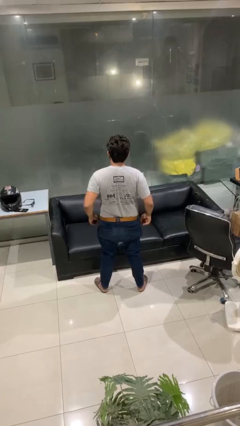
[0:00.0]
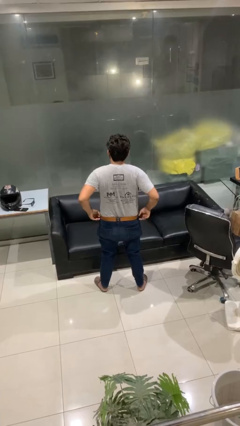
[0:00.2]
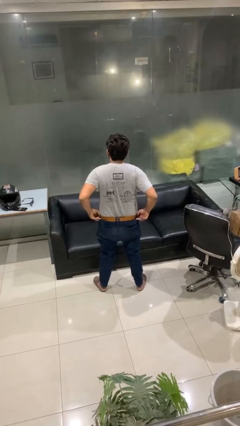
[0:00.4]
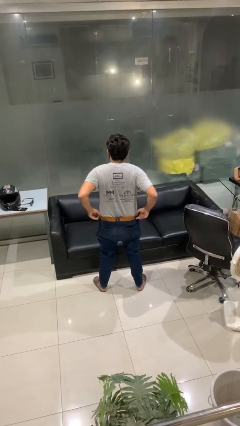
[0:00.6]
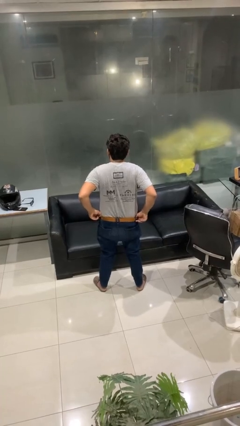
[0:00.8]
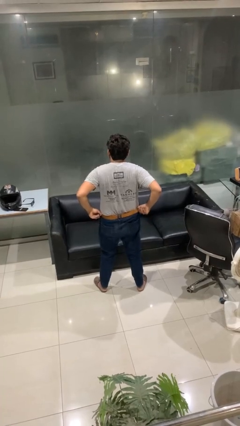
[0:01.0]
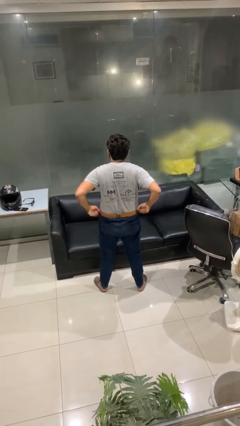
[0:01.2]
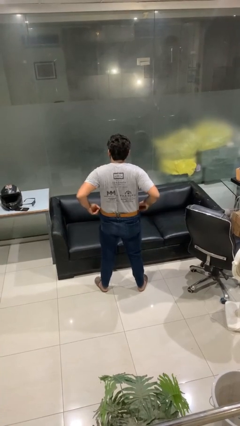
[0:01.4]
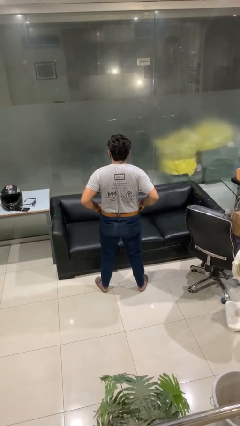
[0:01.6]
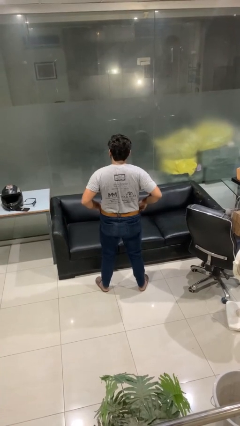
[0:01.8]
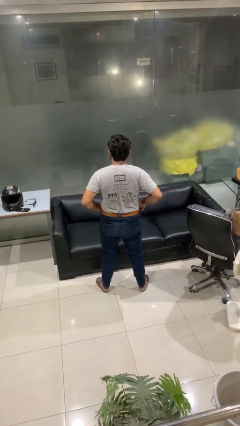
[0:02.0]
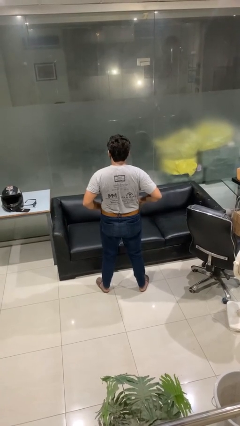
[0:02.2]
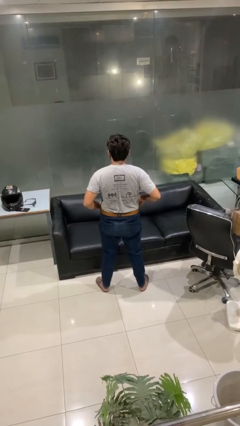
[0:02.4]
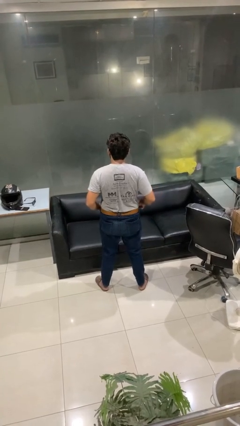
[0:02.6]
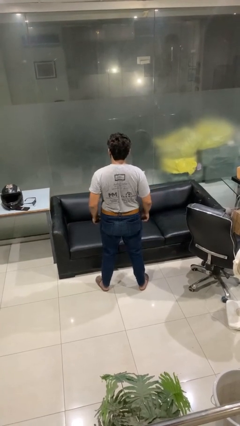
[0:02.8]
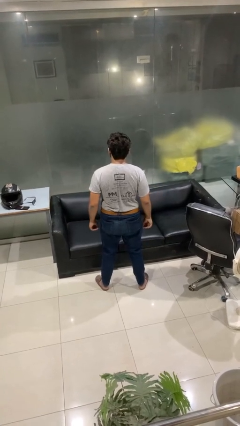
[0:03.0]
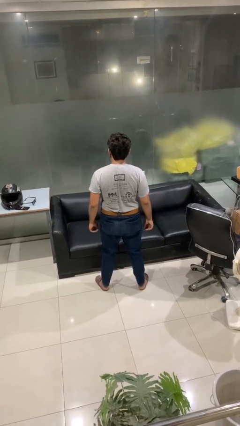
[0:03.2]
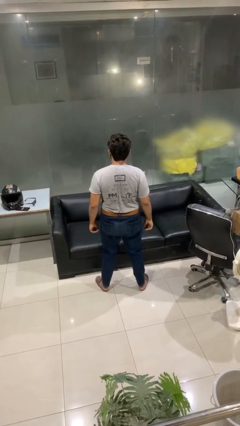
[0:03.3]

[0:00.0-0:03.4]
person hikes up pants

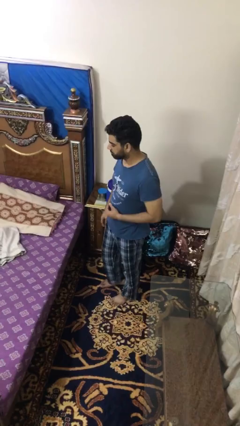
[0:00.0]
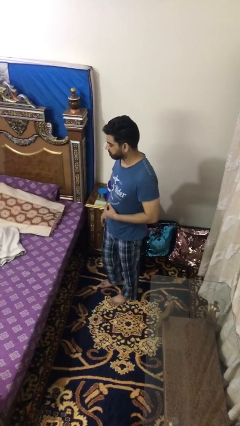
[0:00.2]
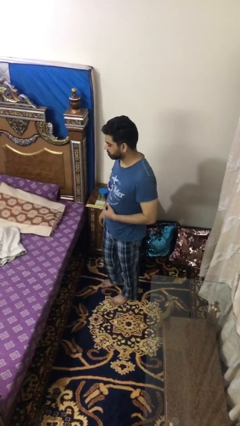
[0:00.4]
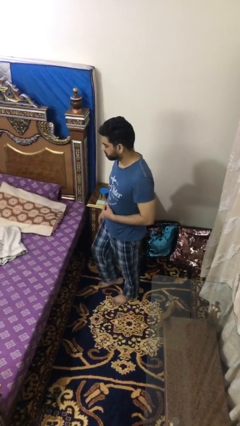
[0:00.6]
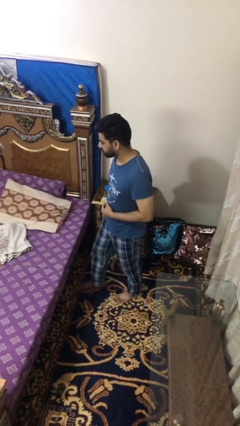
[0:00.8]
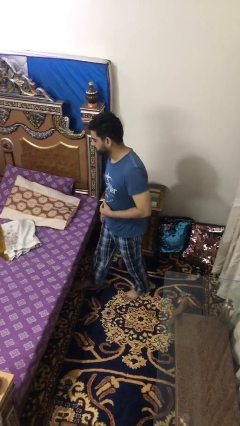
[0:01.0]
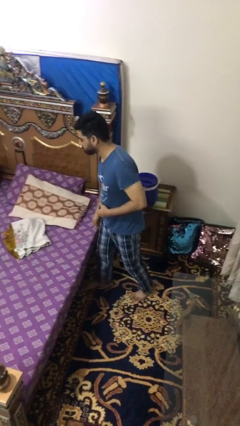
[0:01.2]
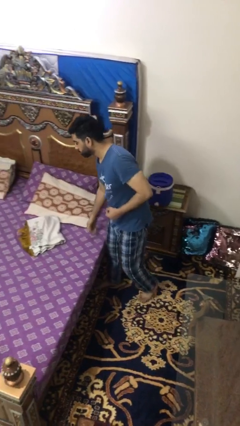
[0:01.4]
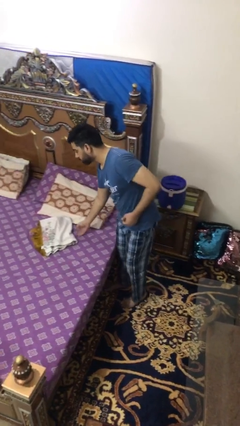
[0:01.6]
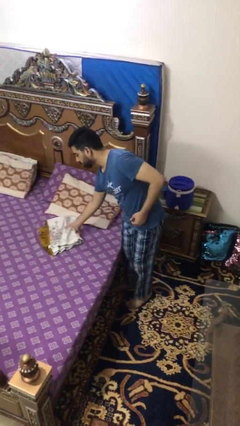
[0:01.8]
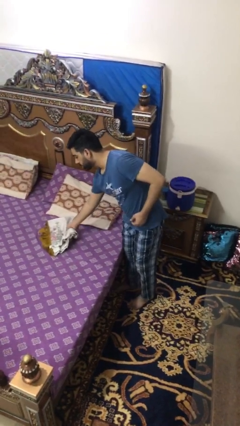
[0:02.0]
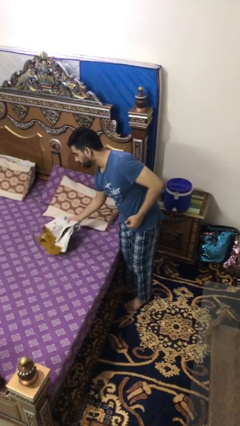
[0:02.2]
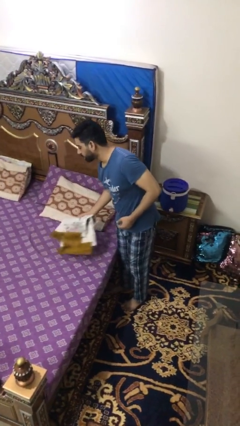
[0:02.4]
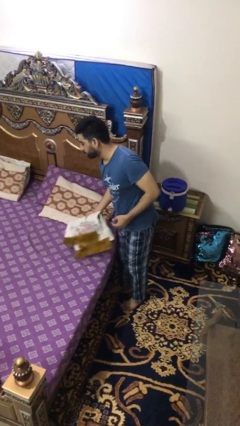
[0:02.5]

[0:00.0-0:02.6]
person picks up object from bed

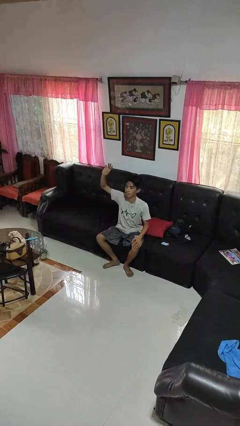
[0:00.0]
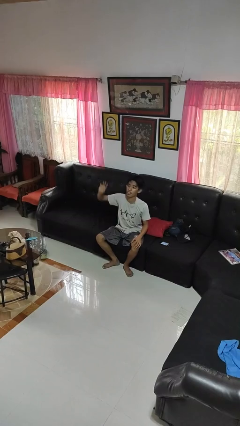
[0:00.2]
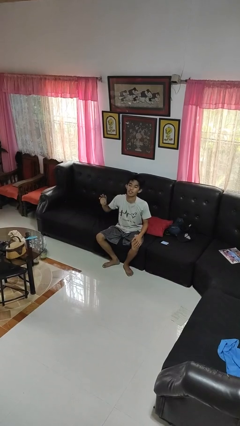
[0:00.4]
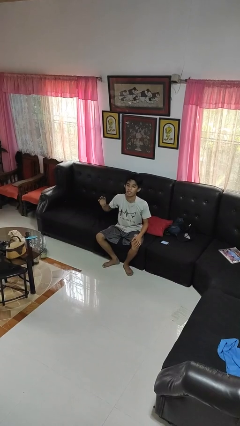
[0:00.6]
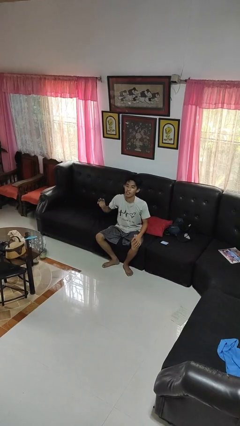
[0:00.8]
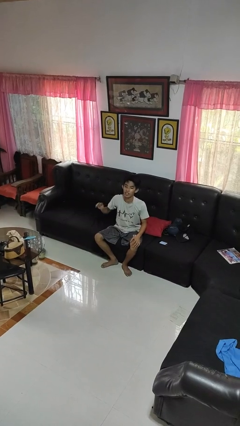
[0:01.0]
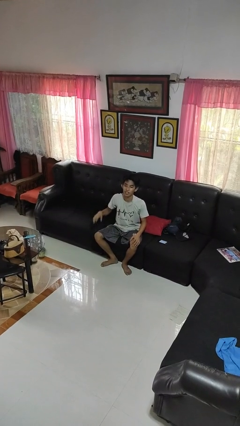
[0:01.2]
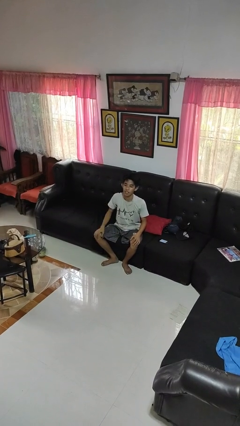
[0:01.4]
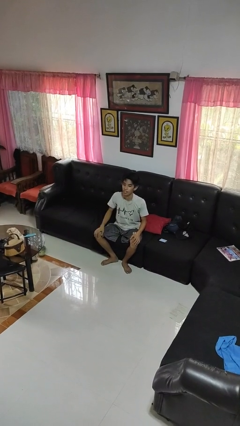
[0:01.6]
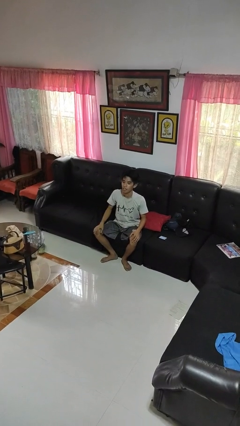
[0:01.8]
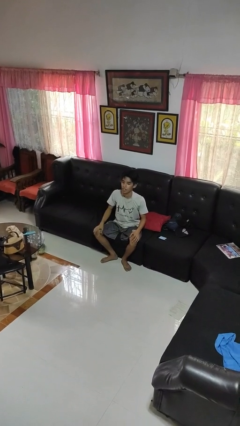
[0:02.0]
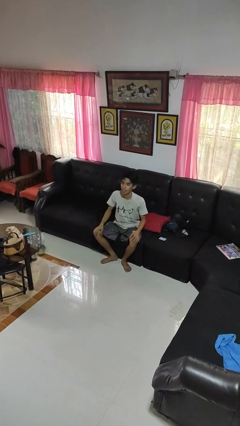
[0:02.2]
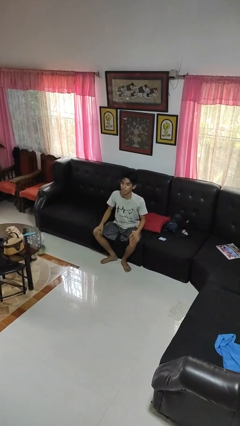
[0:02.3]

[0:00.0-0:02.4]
person gestures lower hand

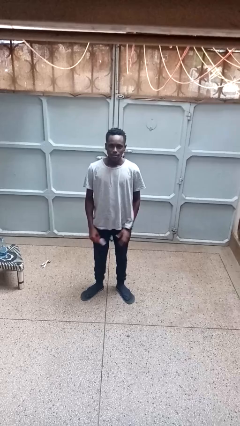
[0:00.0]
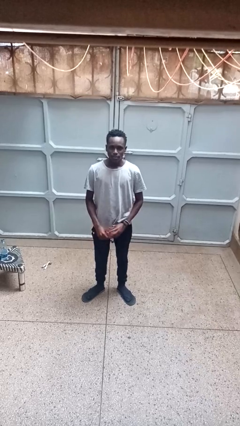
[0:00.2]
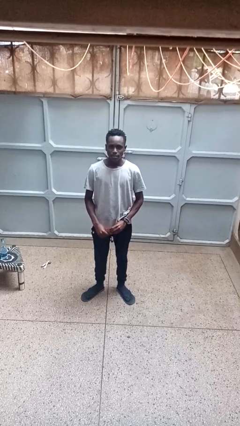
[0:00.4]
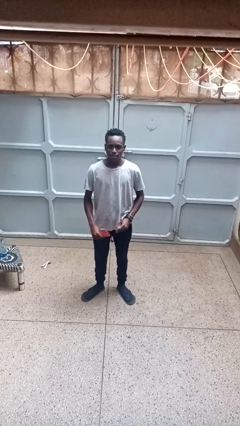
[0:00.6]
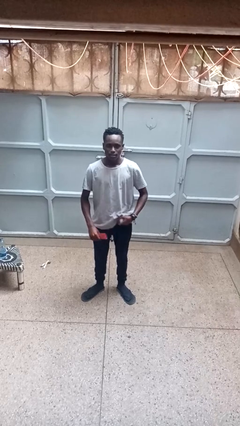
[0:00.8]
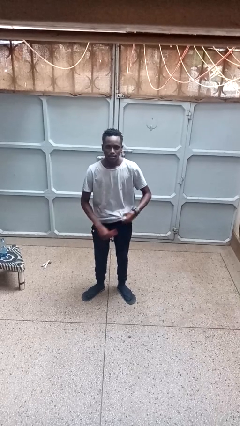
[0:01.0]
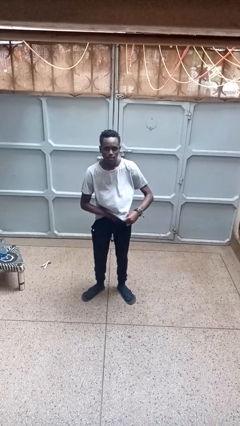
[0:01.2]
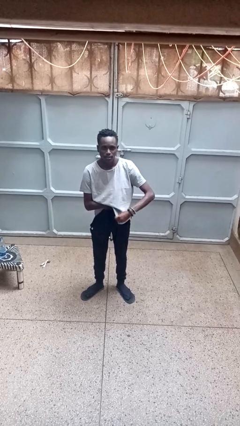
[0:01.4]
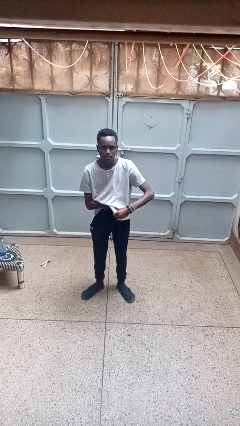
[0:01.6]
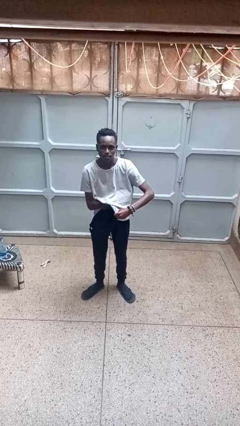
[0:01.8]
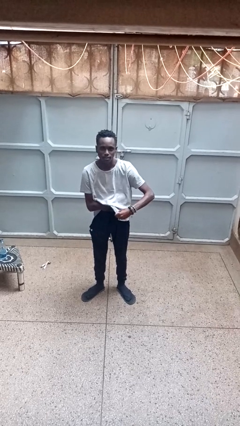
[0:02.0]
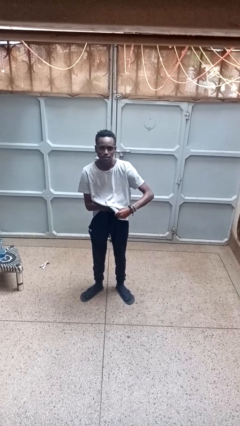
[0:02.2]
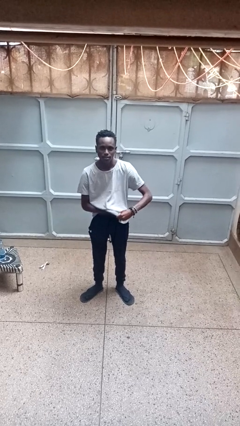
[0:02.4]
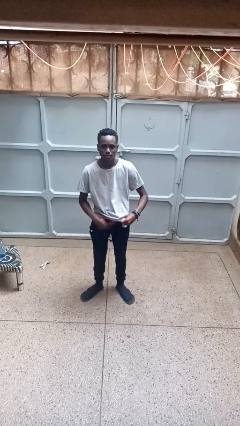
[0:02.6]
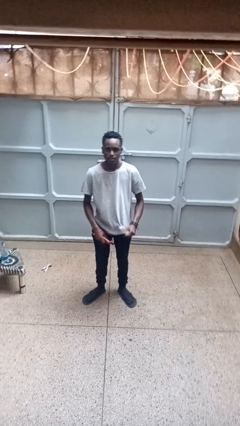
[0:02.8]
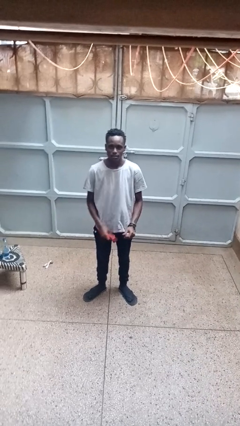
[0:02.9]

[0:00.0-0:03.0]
person applies deodorant

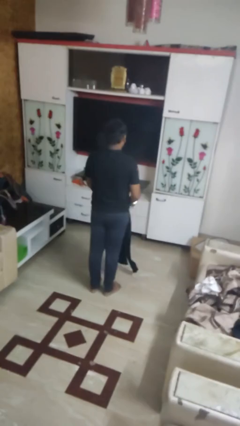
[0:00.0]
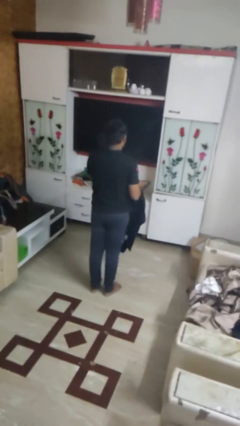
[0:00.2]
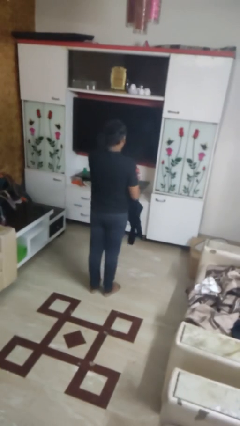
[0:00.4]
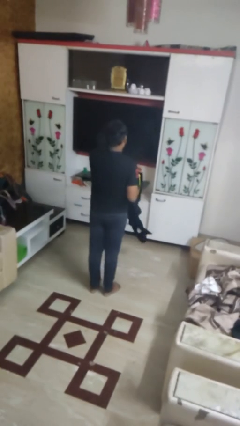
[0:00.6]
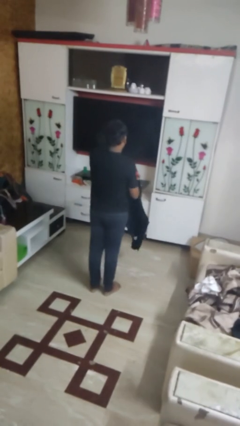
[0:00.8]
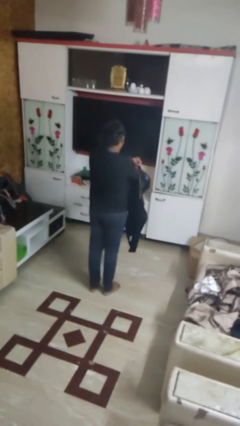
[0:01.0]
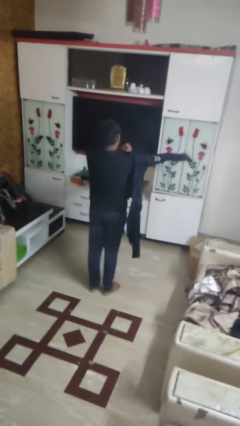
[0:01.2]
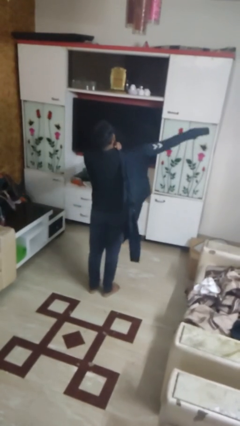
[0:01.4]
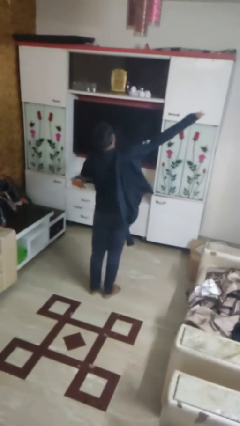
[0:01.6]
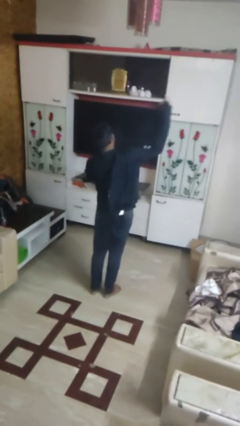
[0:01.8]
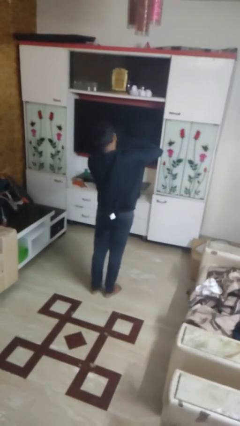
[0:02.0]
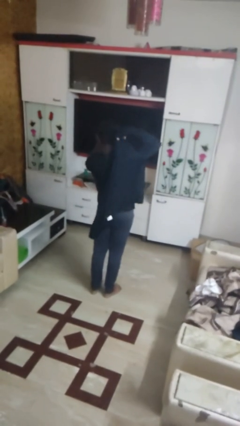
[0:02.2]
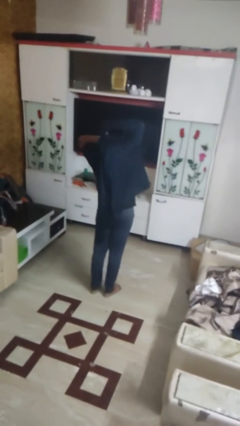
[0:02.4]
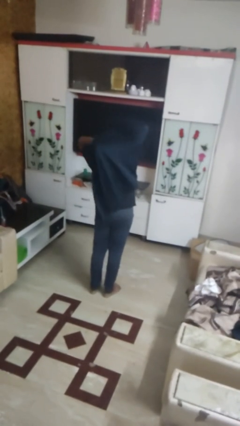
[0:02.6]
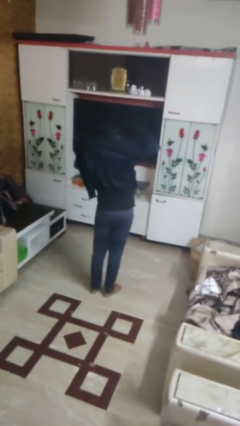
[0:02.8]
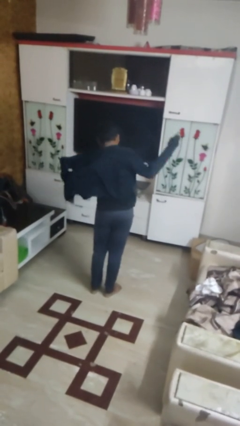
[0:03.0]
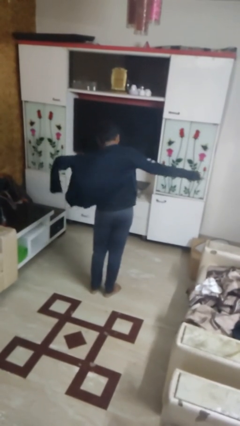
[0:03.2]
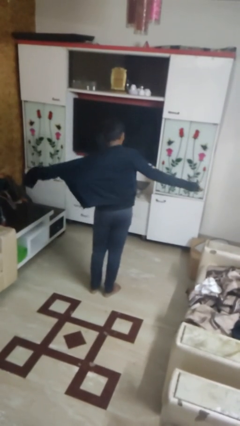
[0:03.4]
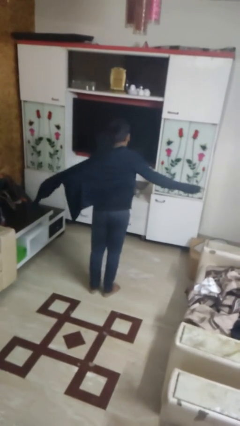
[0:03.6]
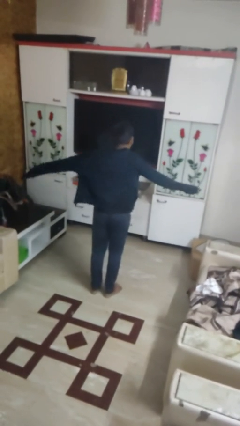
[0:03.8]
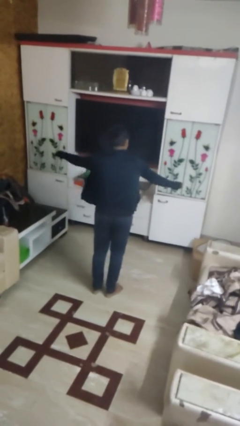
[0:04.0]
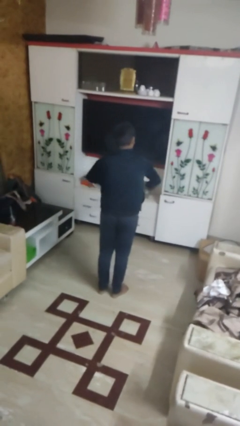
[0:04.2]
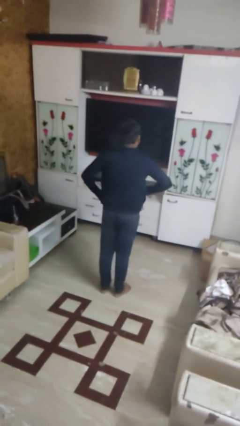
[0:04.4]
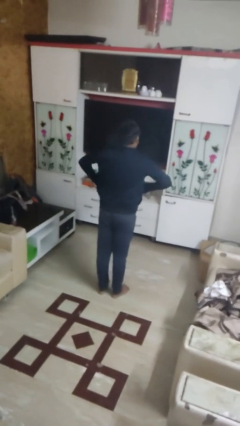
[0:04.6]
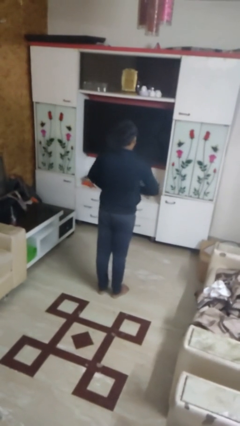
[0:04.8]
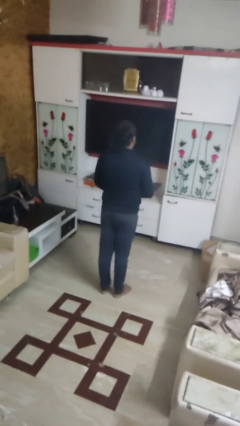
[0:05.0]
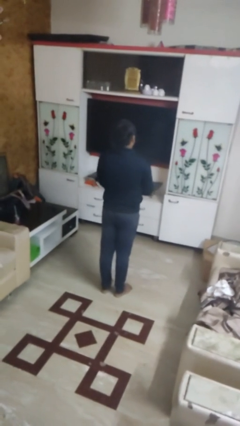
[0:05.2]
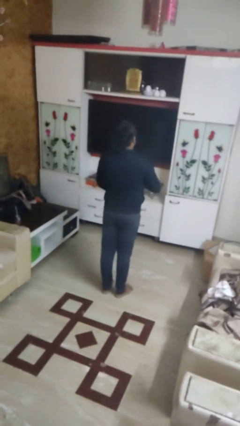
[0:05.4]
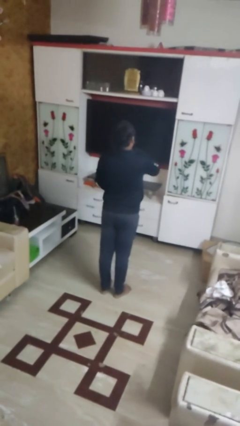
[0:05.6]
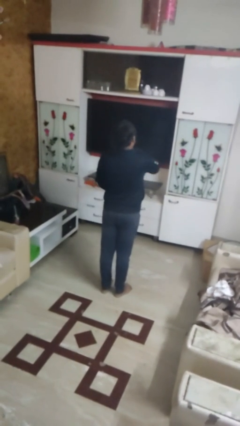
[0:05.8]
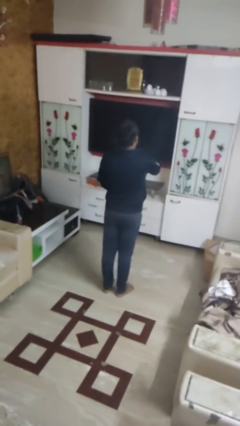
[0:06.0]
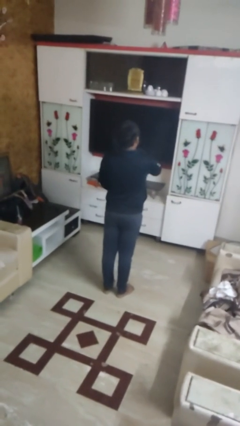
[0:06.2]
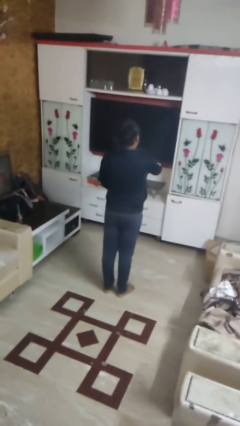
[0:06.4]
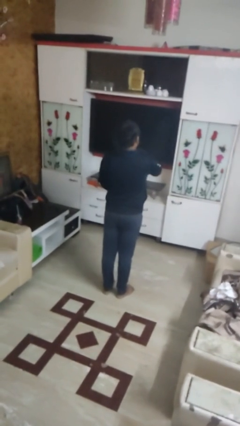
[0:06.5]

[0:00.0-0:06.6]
person puts on jacket
